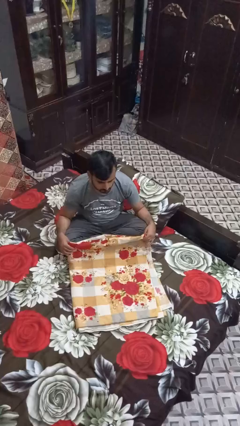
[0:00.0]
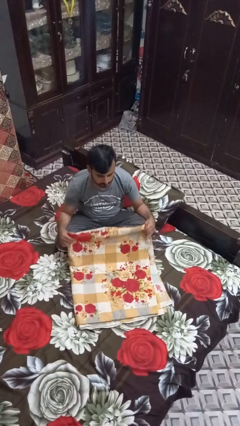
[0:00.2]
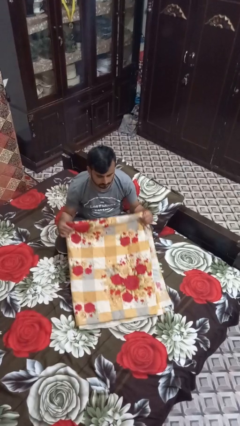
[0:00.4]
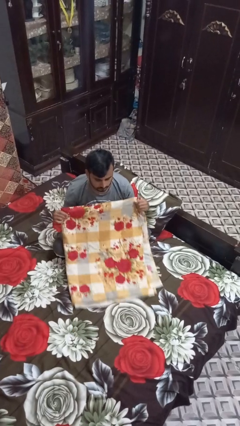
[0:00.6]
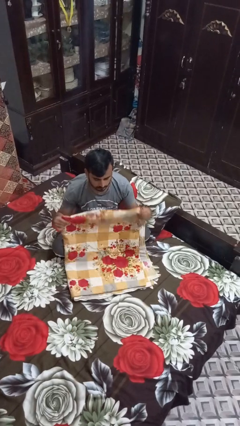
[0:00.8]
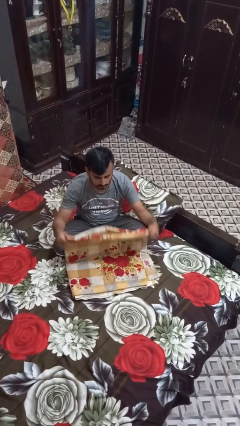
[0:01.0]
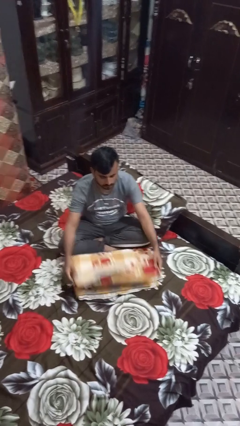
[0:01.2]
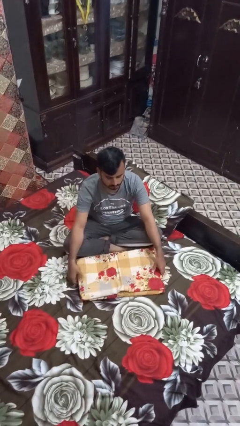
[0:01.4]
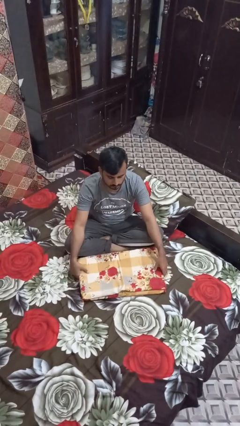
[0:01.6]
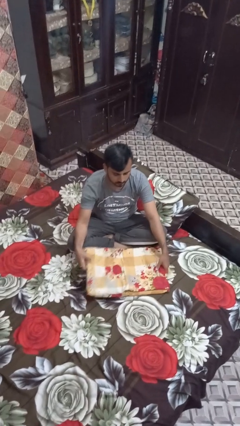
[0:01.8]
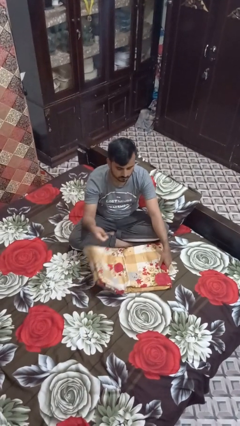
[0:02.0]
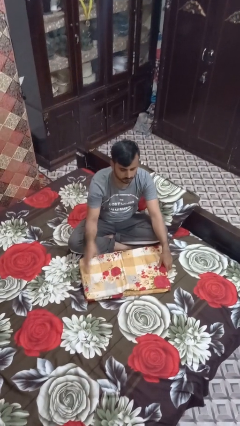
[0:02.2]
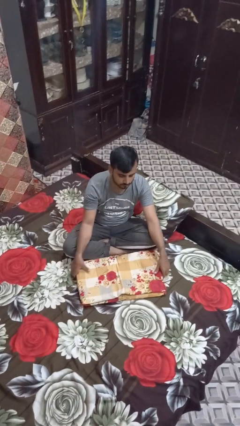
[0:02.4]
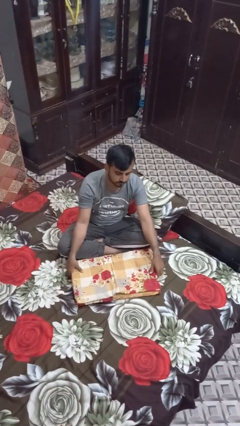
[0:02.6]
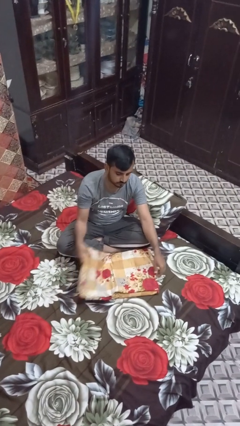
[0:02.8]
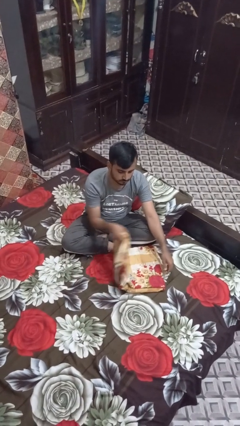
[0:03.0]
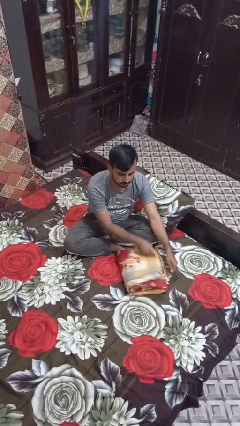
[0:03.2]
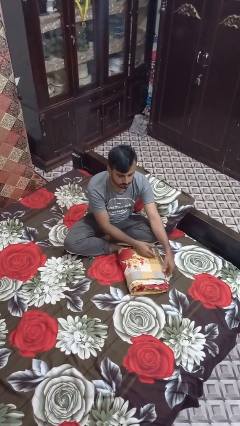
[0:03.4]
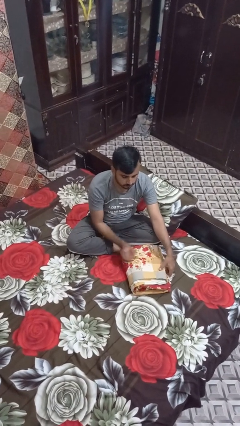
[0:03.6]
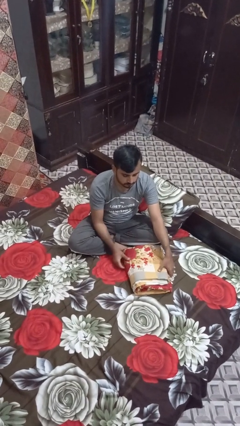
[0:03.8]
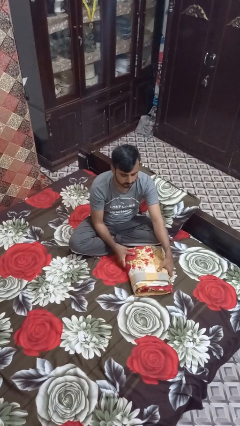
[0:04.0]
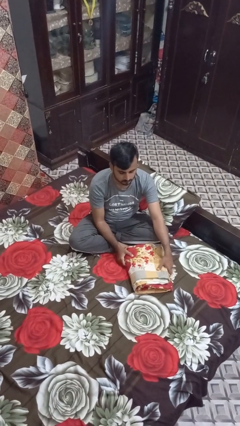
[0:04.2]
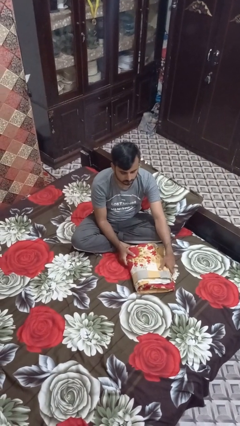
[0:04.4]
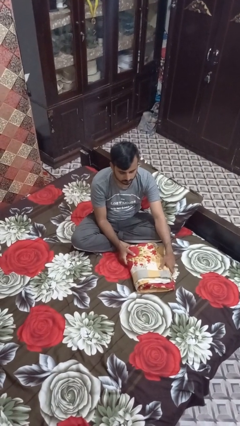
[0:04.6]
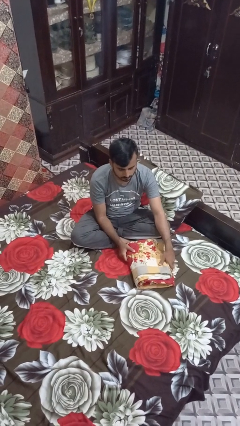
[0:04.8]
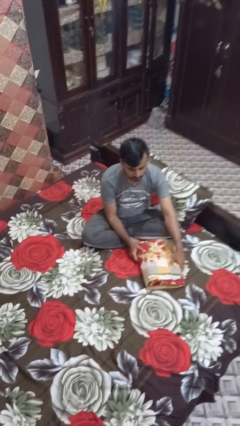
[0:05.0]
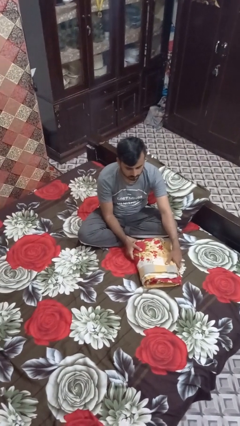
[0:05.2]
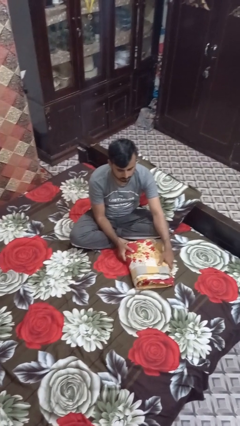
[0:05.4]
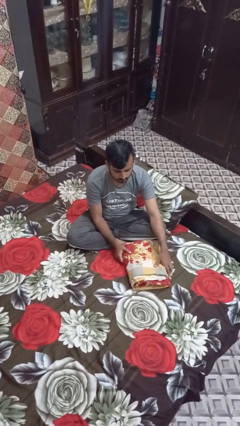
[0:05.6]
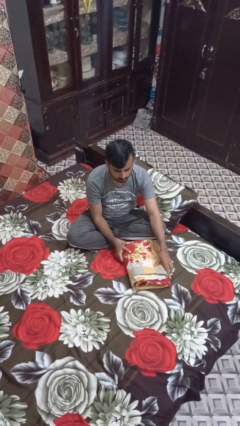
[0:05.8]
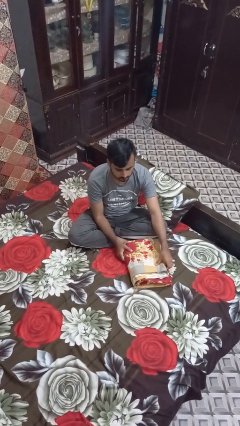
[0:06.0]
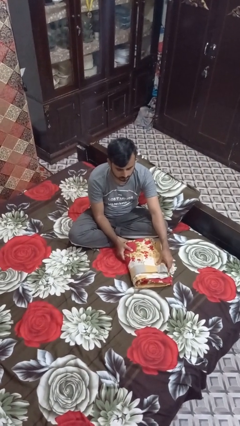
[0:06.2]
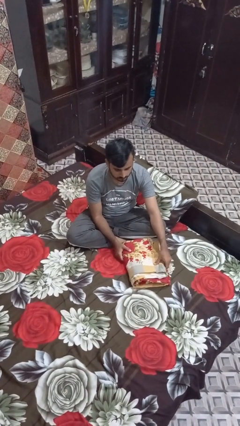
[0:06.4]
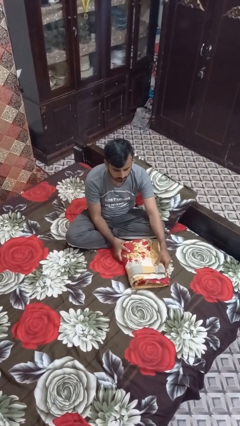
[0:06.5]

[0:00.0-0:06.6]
person folds blanket

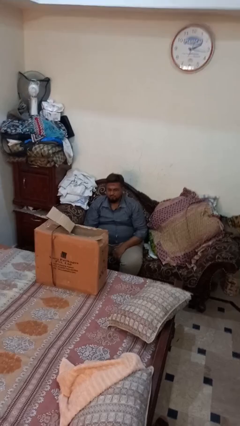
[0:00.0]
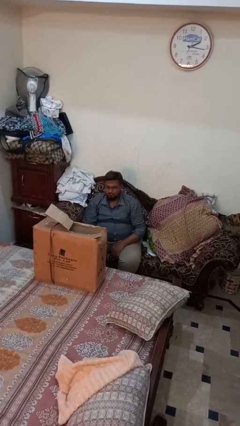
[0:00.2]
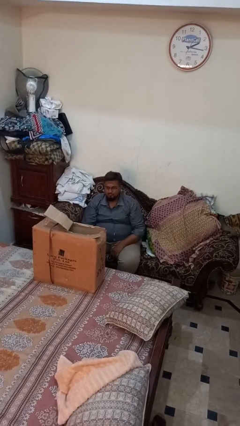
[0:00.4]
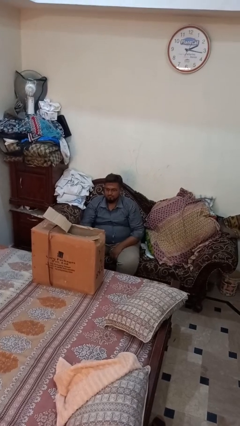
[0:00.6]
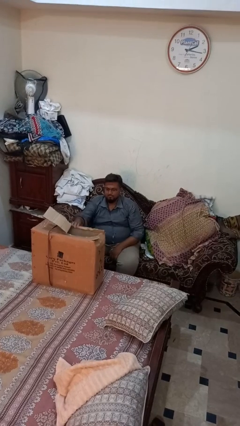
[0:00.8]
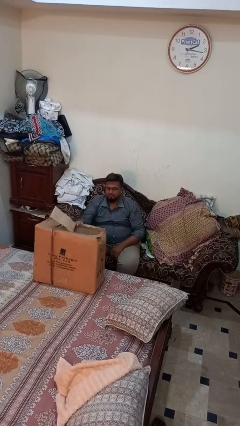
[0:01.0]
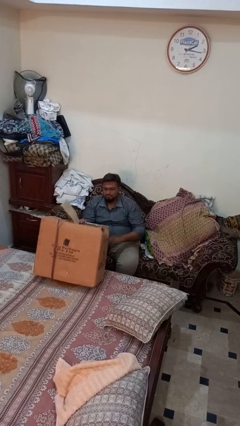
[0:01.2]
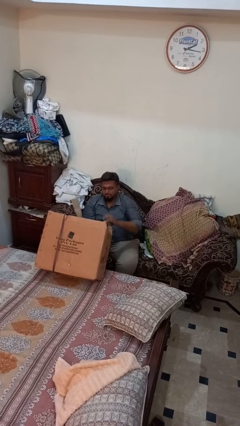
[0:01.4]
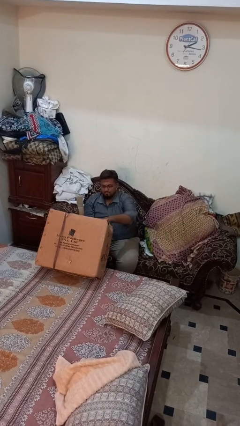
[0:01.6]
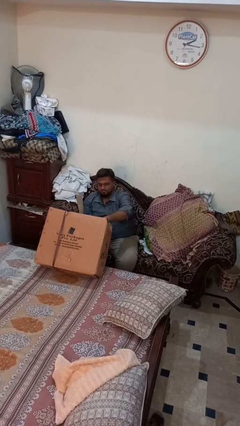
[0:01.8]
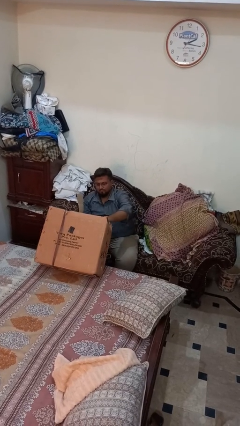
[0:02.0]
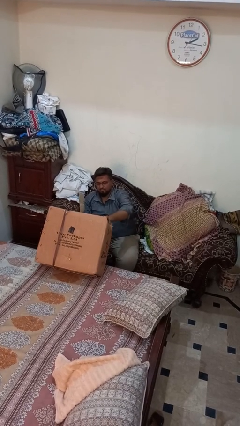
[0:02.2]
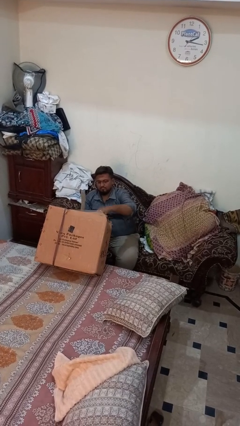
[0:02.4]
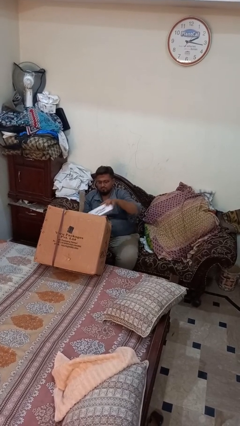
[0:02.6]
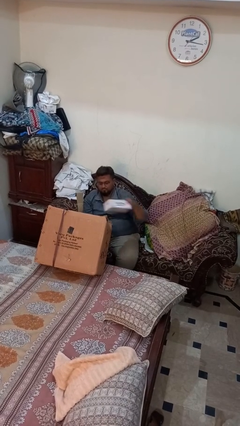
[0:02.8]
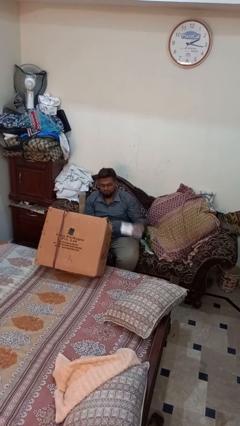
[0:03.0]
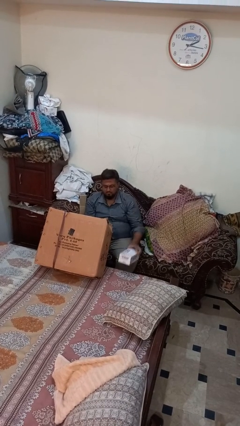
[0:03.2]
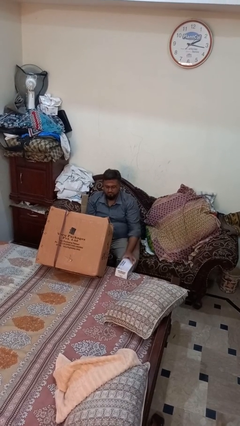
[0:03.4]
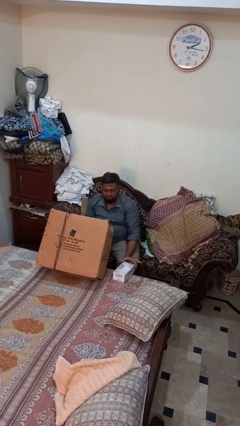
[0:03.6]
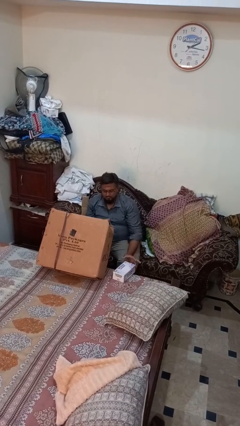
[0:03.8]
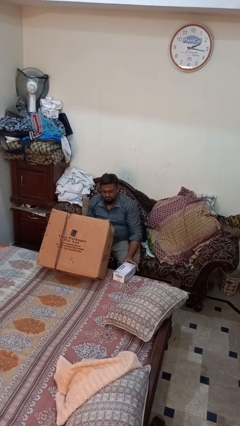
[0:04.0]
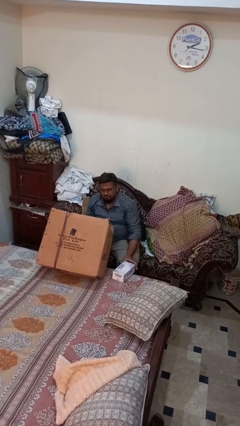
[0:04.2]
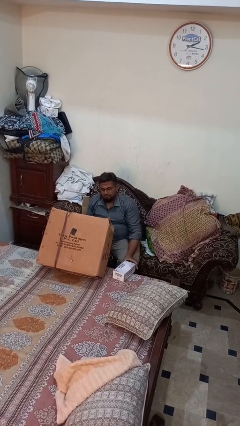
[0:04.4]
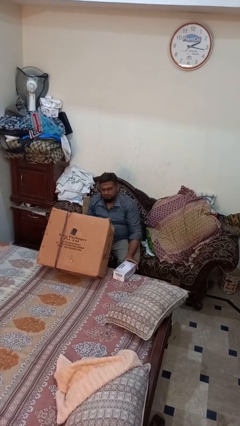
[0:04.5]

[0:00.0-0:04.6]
person takes object from box

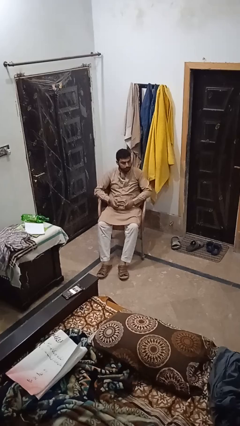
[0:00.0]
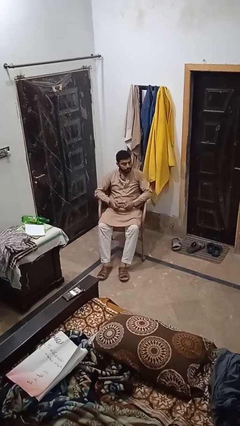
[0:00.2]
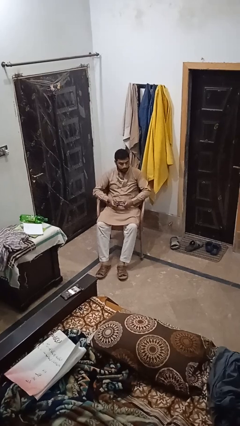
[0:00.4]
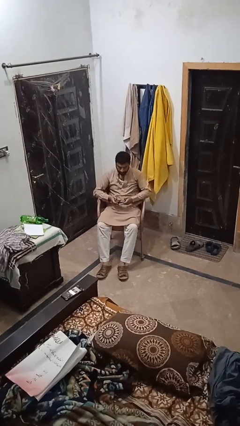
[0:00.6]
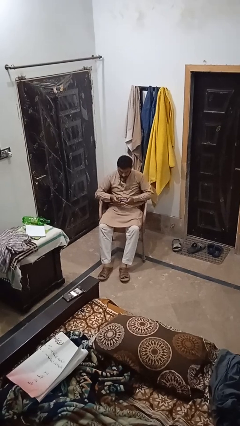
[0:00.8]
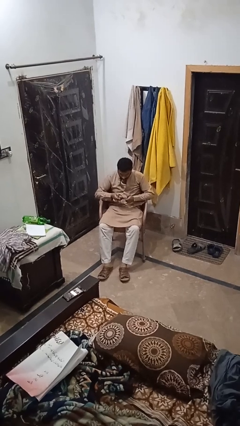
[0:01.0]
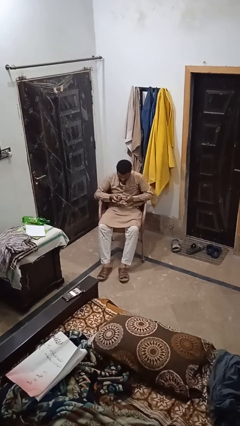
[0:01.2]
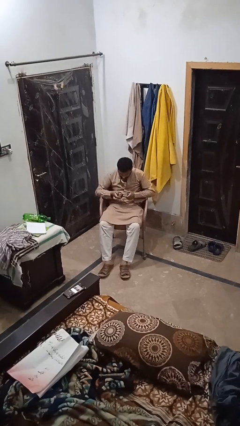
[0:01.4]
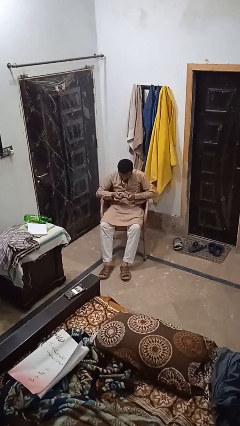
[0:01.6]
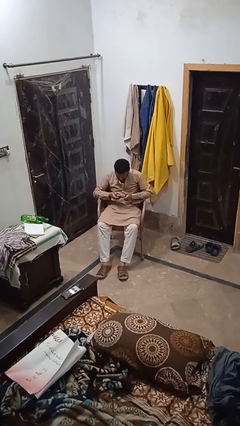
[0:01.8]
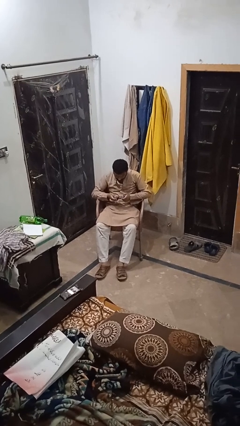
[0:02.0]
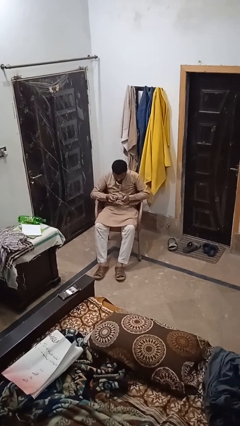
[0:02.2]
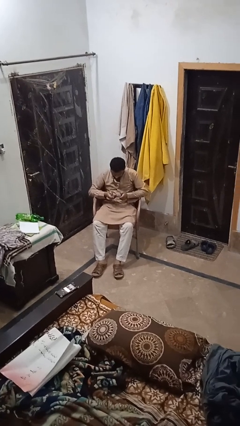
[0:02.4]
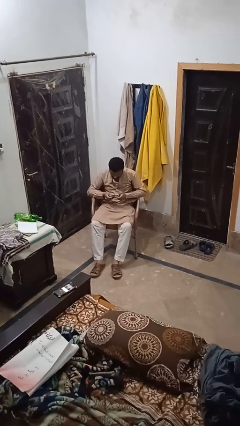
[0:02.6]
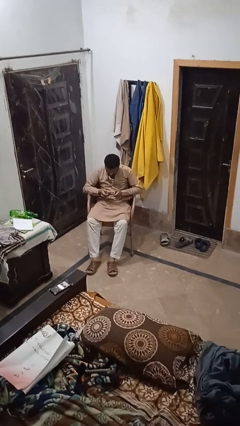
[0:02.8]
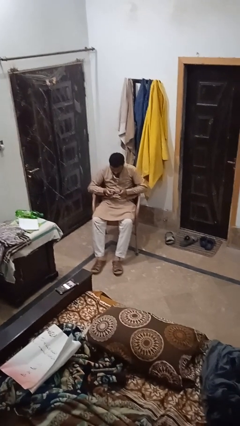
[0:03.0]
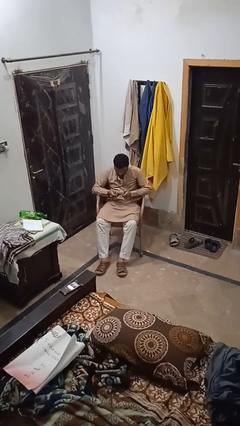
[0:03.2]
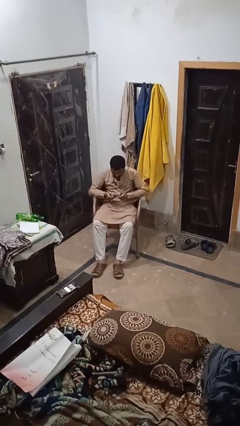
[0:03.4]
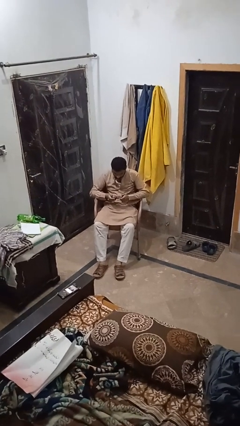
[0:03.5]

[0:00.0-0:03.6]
person interacts with handheld game

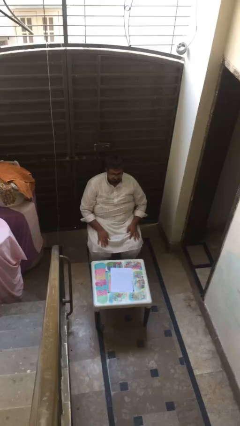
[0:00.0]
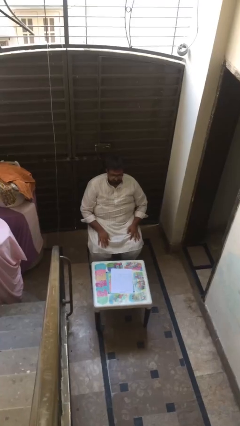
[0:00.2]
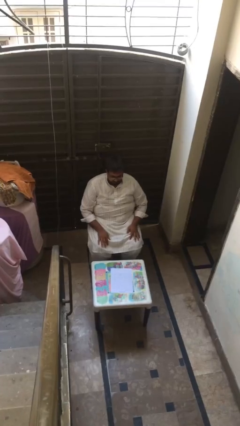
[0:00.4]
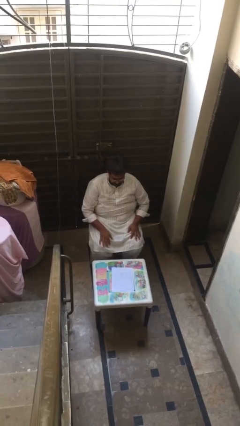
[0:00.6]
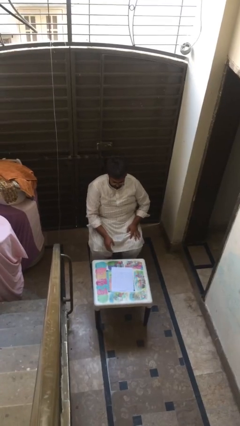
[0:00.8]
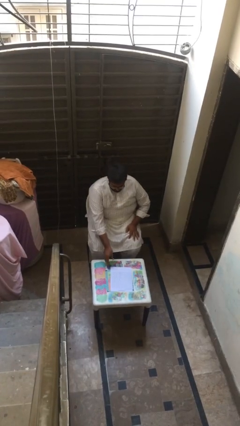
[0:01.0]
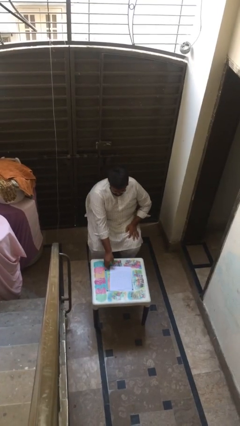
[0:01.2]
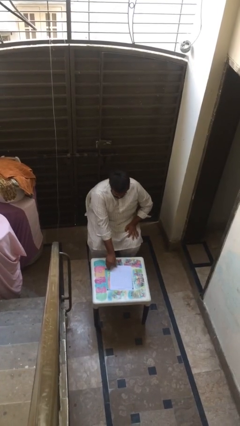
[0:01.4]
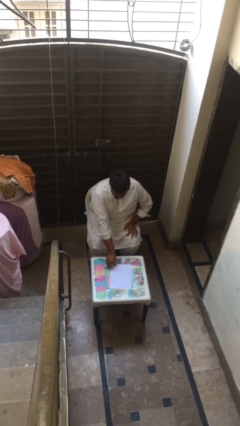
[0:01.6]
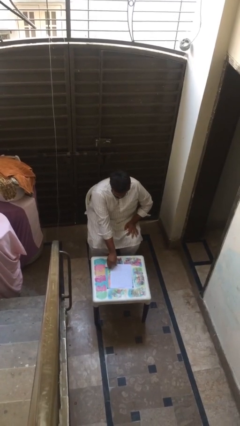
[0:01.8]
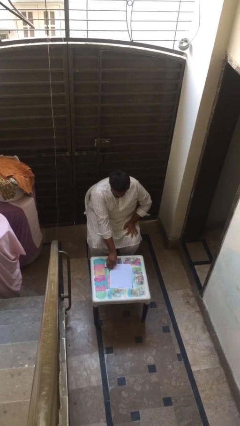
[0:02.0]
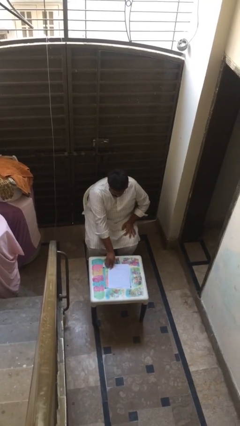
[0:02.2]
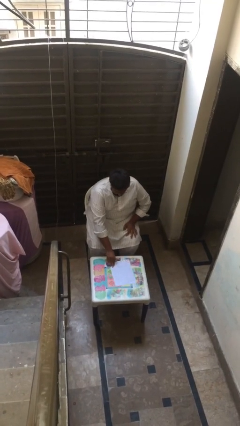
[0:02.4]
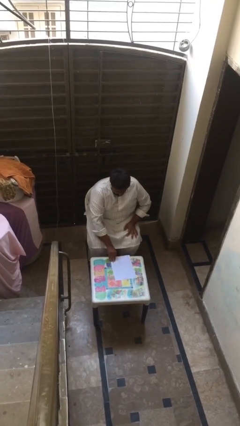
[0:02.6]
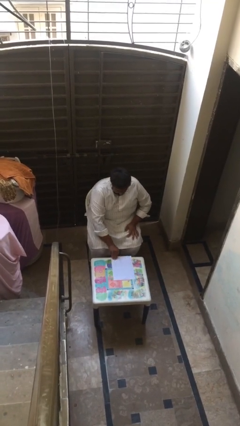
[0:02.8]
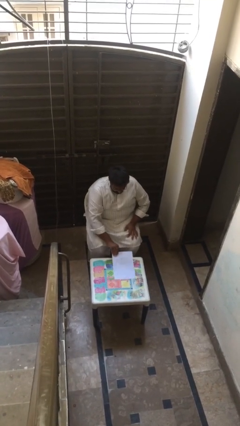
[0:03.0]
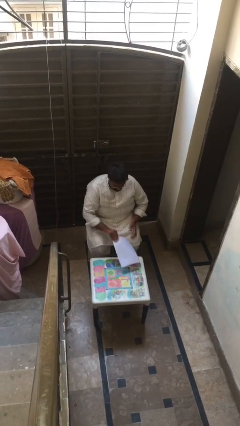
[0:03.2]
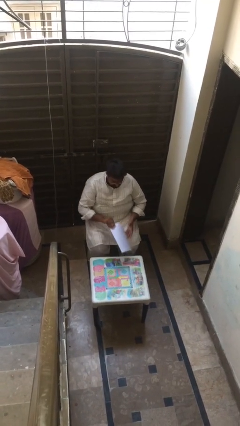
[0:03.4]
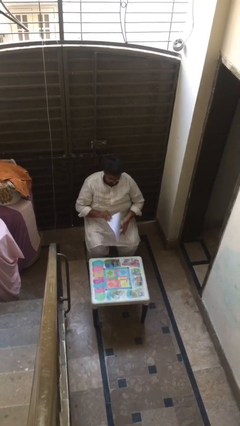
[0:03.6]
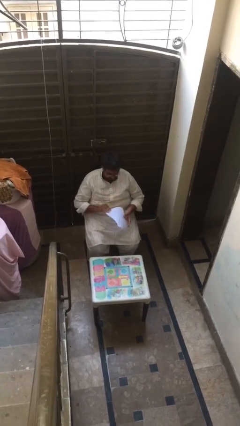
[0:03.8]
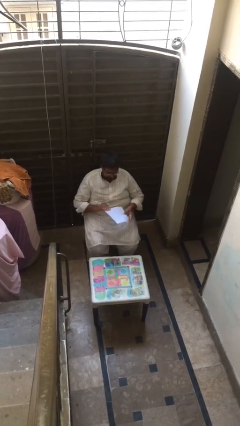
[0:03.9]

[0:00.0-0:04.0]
person picks up object from table
